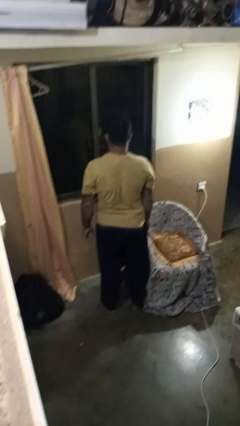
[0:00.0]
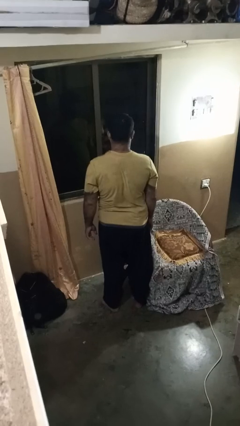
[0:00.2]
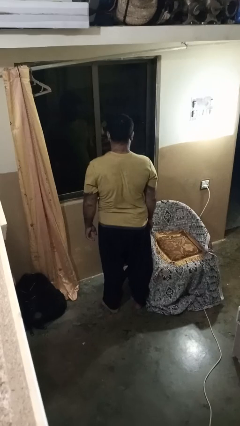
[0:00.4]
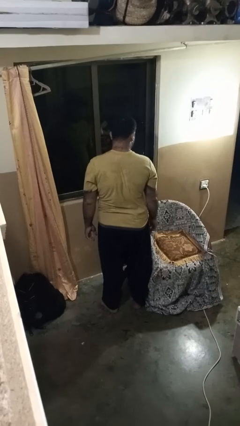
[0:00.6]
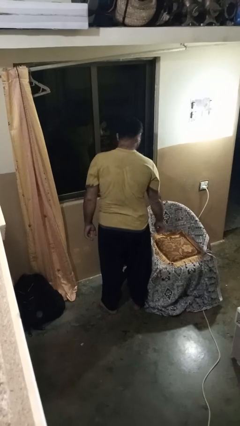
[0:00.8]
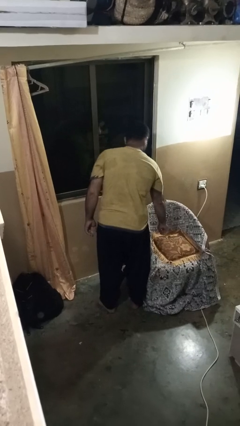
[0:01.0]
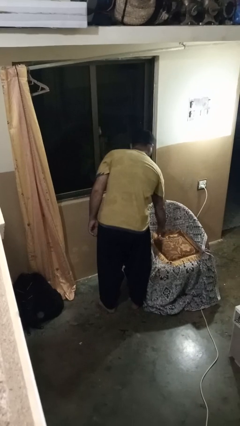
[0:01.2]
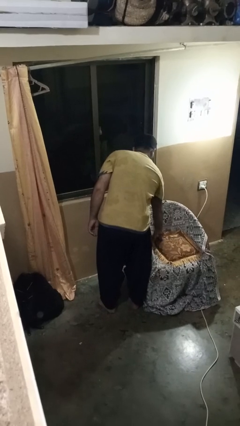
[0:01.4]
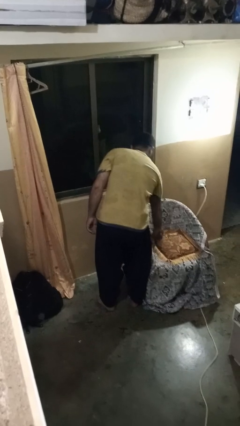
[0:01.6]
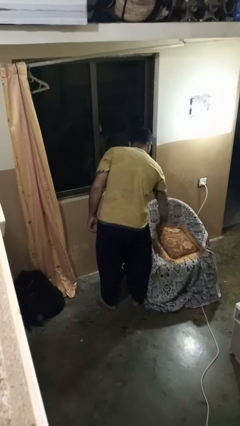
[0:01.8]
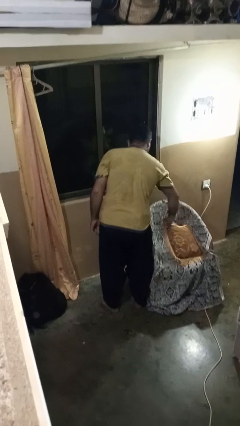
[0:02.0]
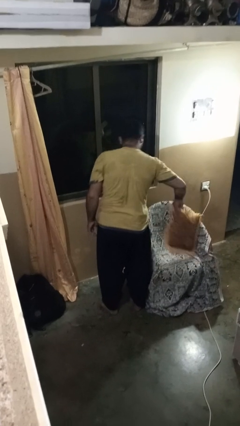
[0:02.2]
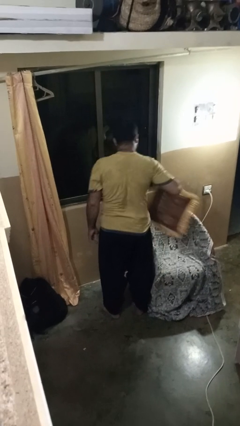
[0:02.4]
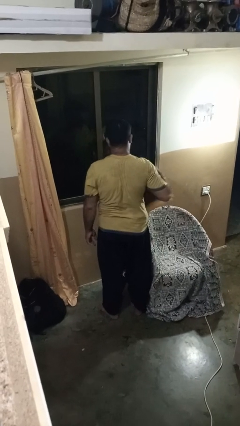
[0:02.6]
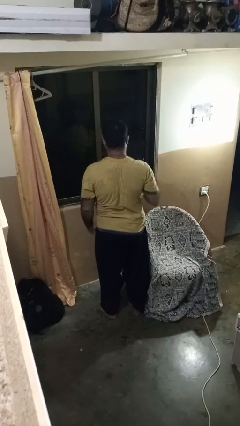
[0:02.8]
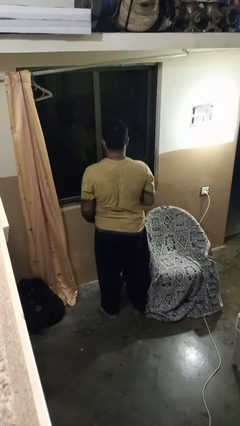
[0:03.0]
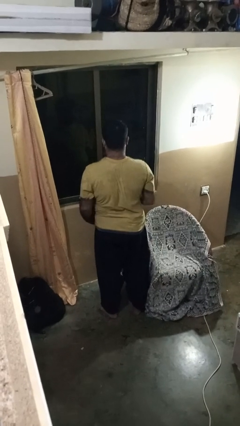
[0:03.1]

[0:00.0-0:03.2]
person picks up object from couch

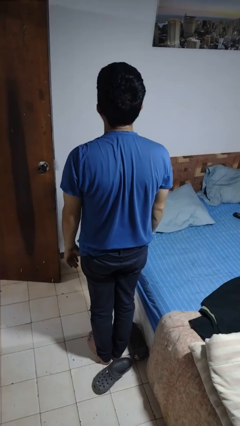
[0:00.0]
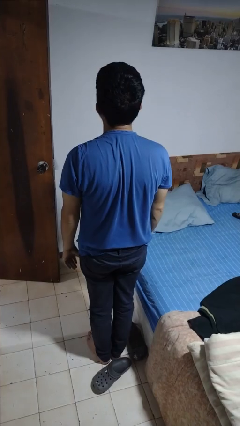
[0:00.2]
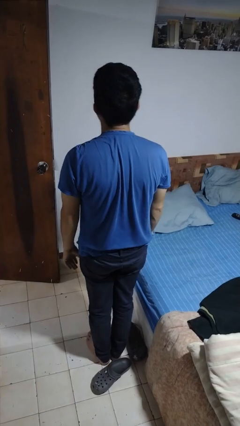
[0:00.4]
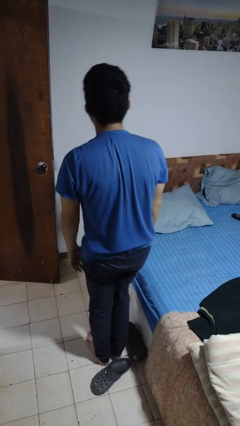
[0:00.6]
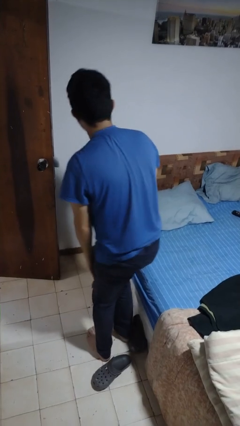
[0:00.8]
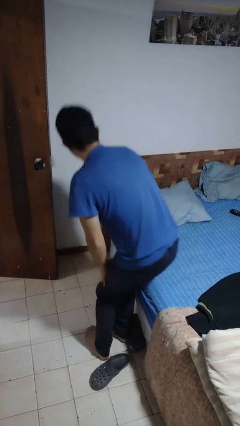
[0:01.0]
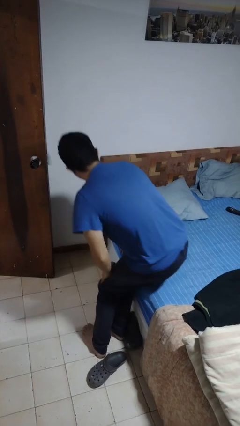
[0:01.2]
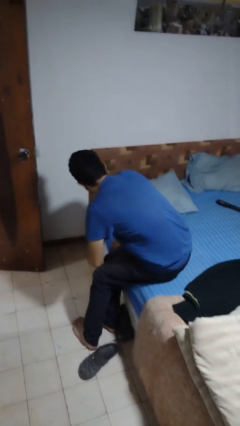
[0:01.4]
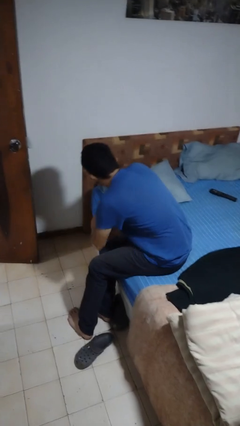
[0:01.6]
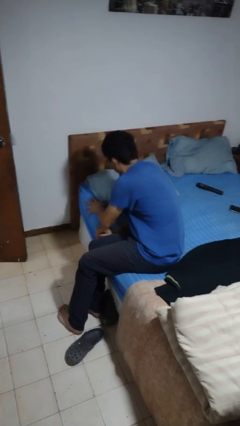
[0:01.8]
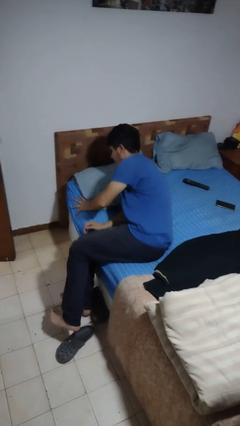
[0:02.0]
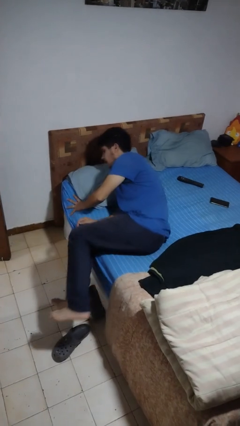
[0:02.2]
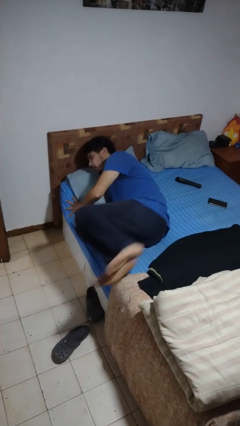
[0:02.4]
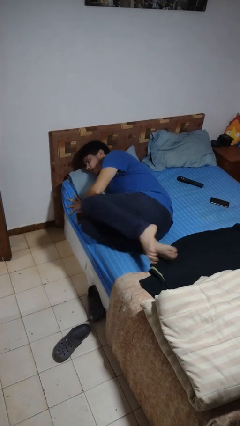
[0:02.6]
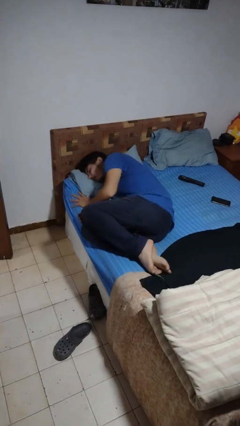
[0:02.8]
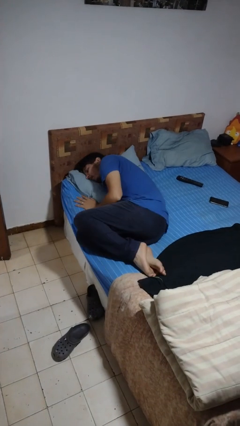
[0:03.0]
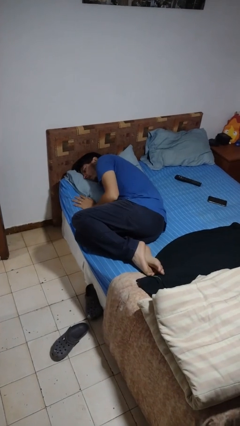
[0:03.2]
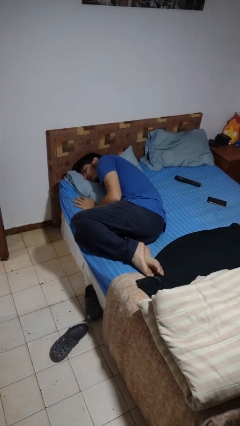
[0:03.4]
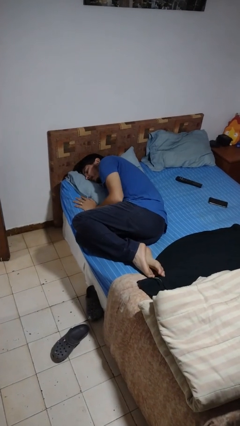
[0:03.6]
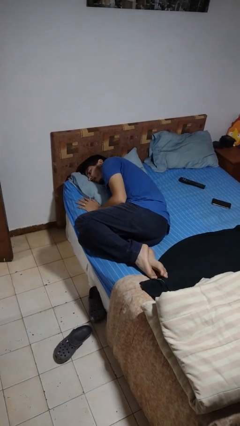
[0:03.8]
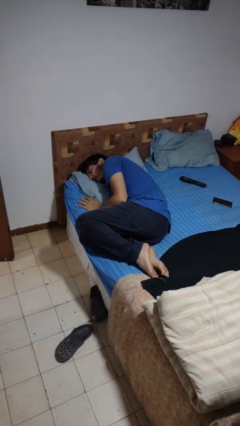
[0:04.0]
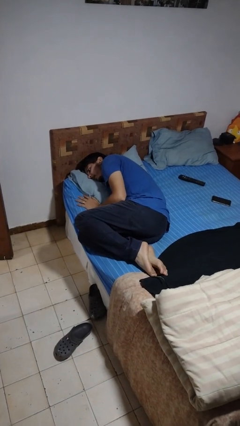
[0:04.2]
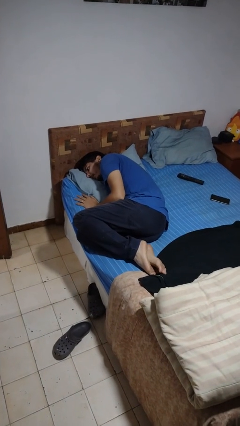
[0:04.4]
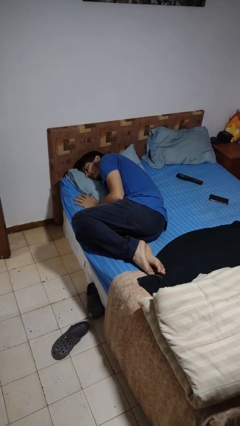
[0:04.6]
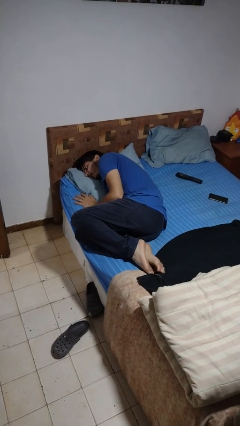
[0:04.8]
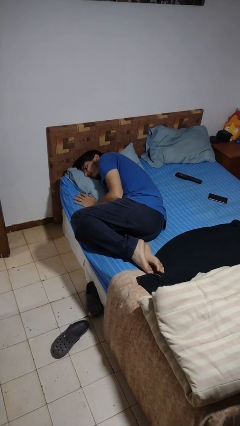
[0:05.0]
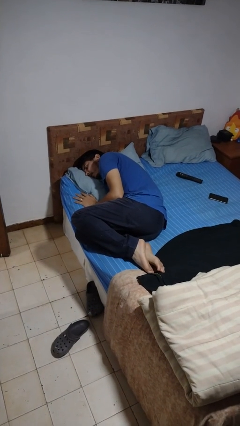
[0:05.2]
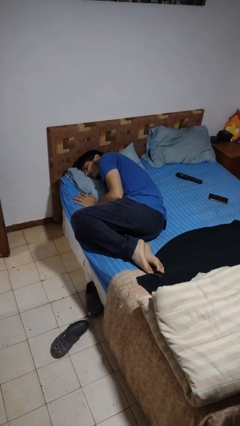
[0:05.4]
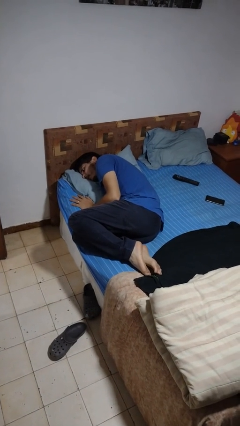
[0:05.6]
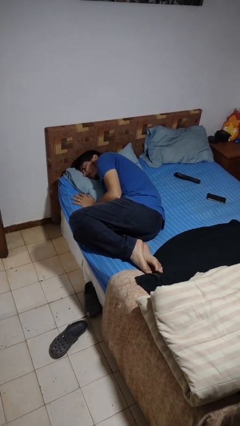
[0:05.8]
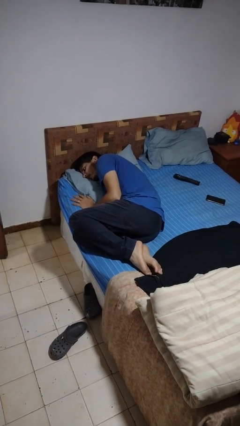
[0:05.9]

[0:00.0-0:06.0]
person lies down on bed

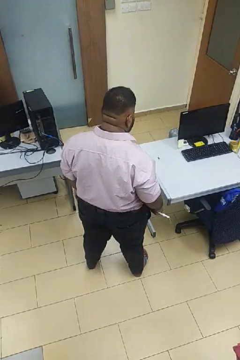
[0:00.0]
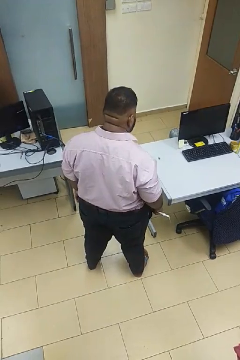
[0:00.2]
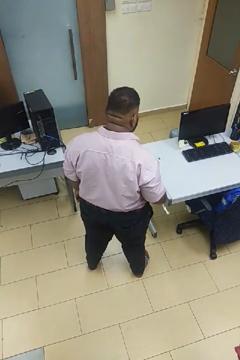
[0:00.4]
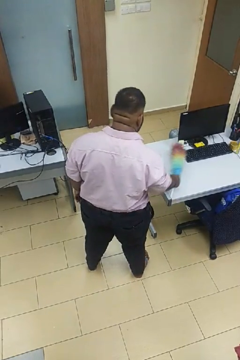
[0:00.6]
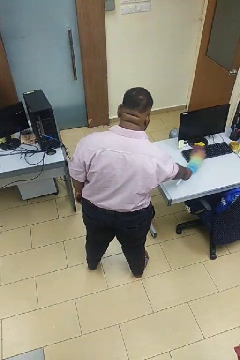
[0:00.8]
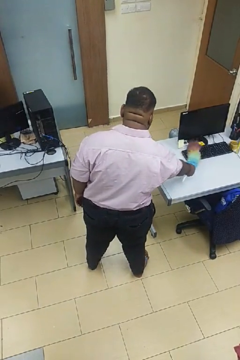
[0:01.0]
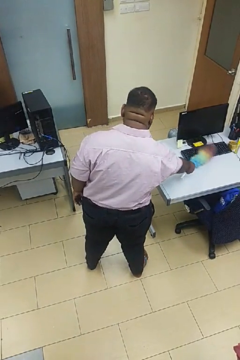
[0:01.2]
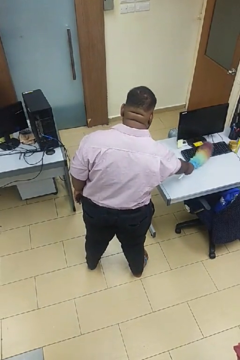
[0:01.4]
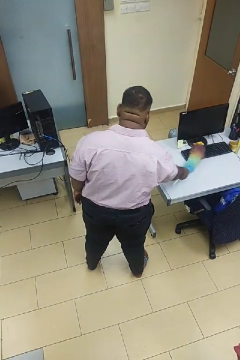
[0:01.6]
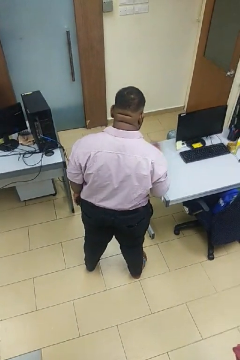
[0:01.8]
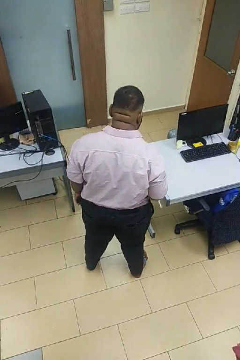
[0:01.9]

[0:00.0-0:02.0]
person dusts furniture

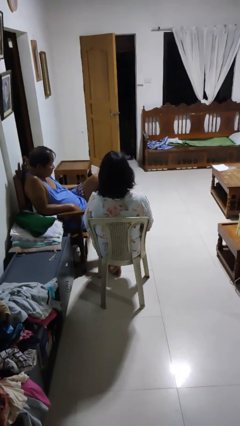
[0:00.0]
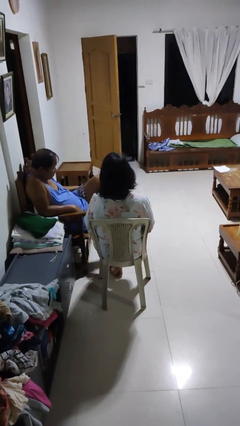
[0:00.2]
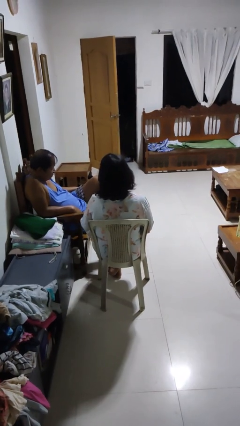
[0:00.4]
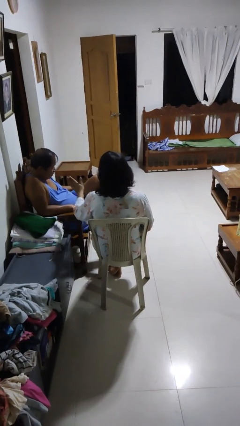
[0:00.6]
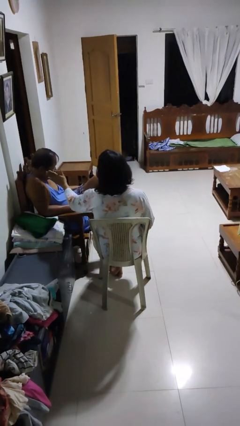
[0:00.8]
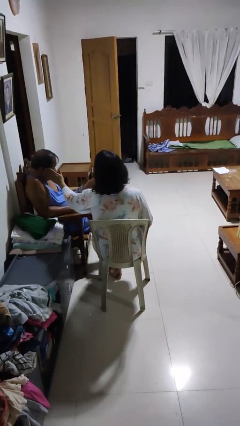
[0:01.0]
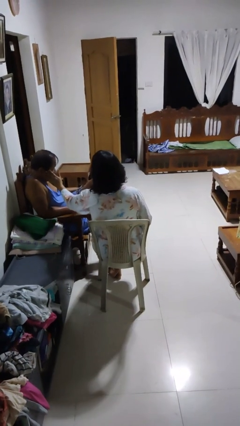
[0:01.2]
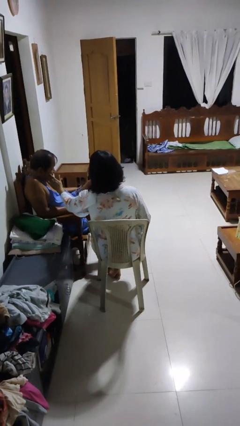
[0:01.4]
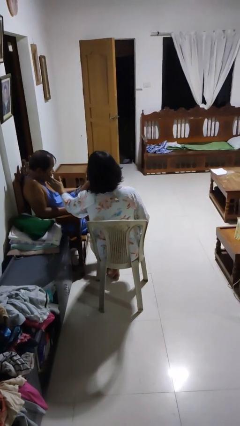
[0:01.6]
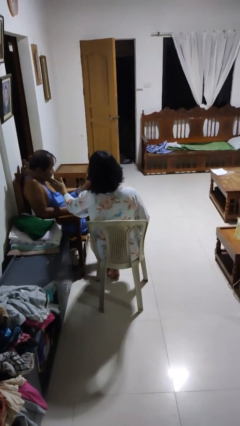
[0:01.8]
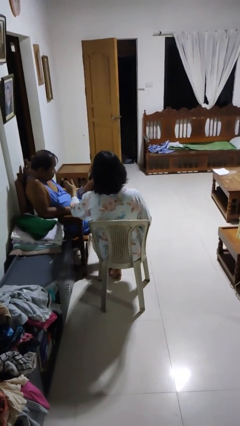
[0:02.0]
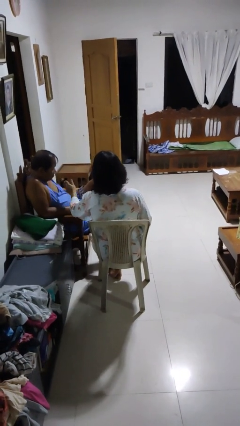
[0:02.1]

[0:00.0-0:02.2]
person touches face of person

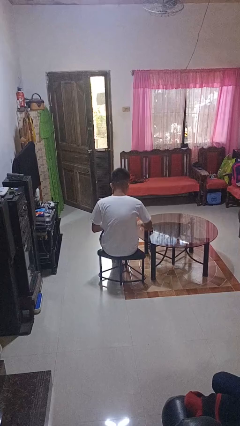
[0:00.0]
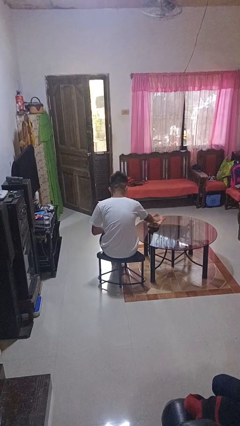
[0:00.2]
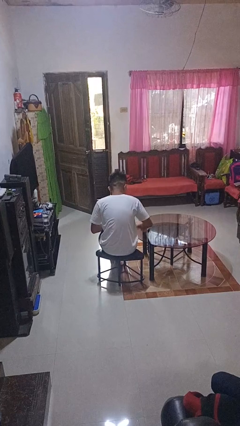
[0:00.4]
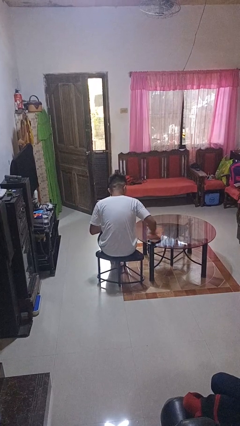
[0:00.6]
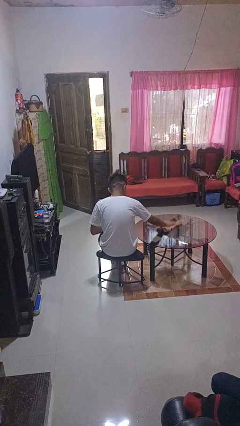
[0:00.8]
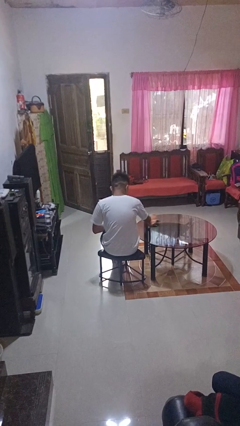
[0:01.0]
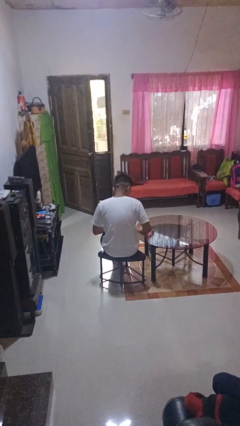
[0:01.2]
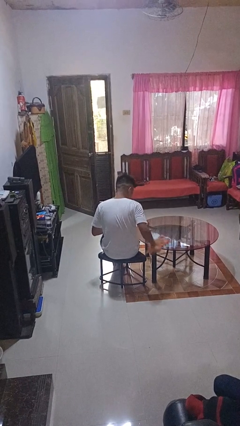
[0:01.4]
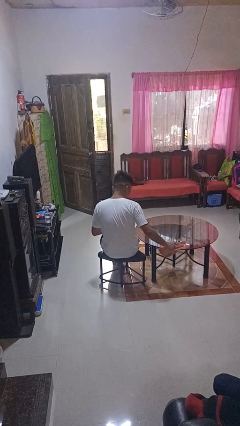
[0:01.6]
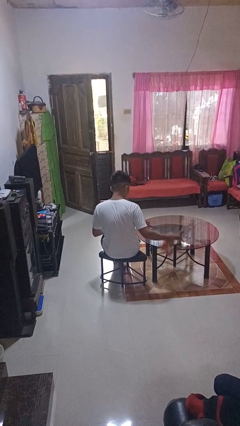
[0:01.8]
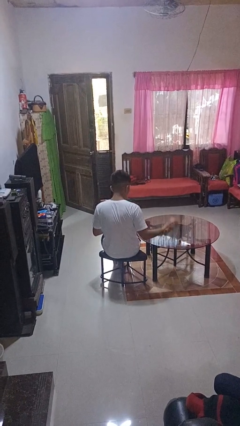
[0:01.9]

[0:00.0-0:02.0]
person cleans table with rag

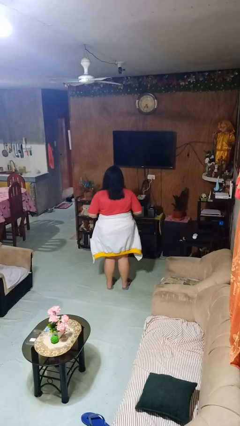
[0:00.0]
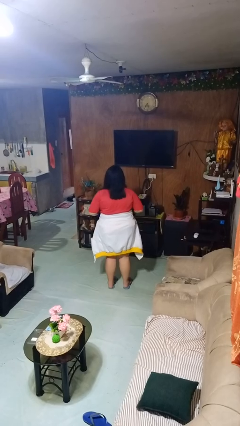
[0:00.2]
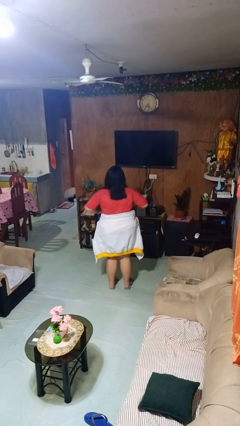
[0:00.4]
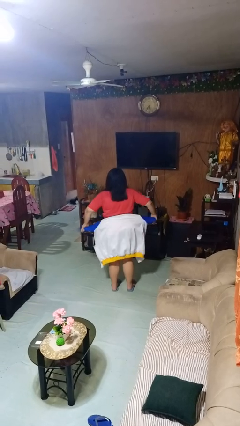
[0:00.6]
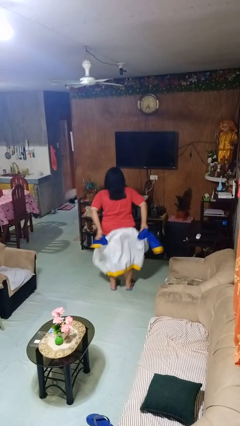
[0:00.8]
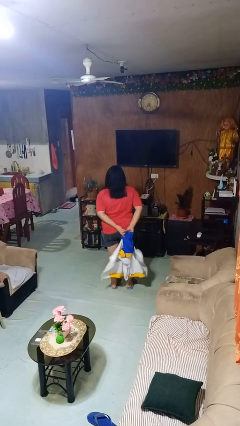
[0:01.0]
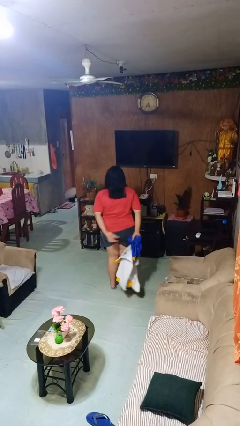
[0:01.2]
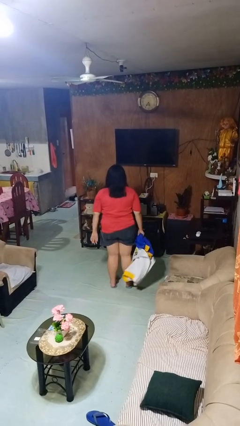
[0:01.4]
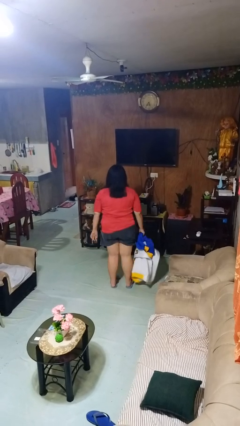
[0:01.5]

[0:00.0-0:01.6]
person unties jacket around waist

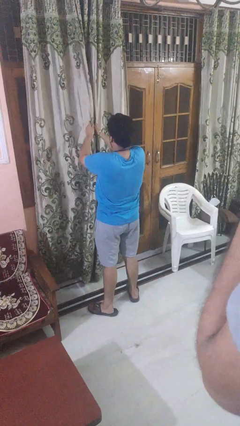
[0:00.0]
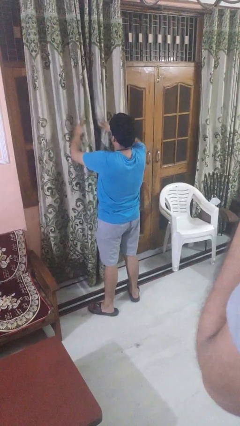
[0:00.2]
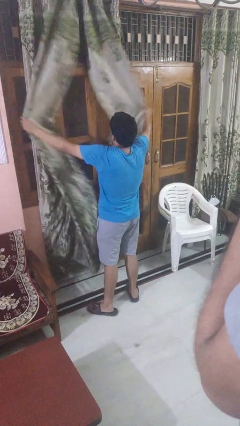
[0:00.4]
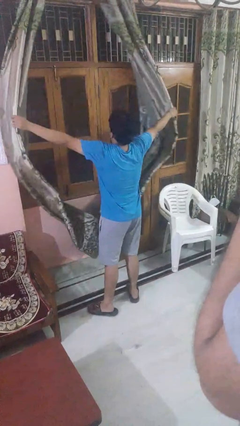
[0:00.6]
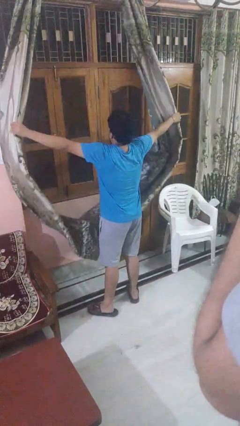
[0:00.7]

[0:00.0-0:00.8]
person opens curtains
